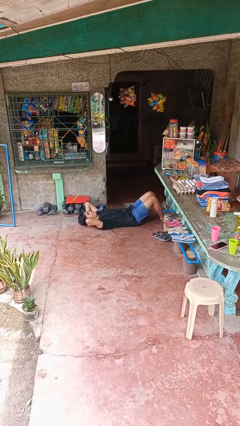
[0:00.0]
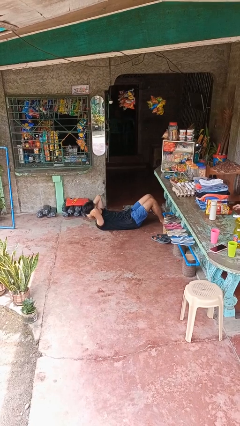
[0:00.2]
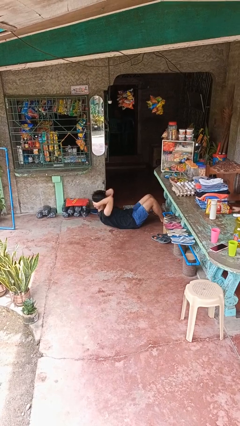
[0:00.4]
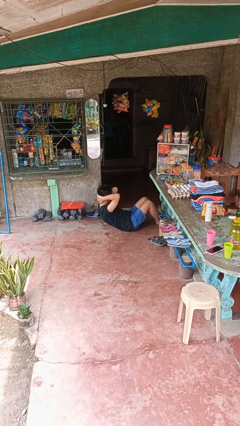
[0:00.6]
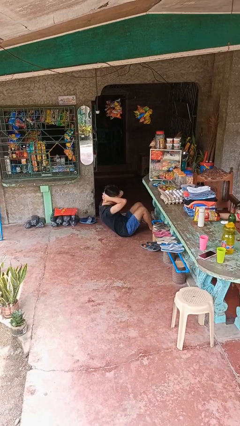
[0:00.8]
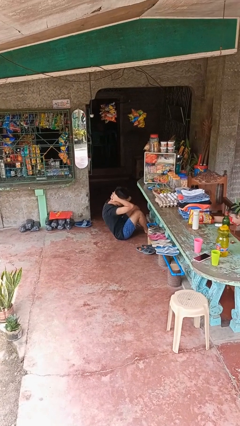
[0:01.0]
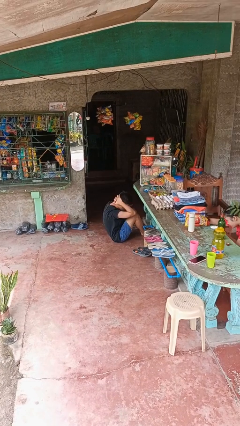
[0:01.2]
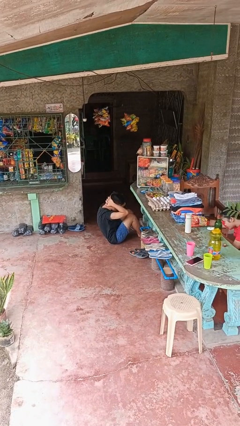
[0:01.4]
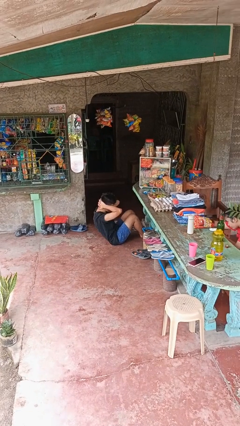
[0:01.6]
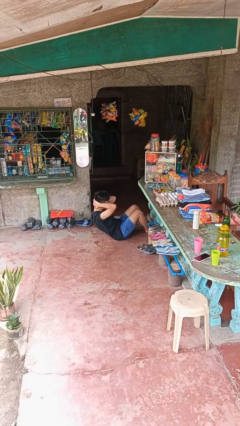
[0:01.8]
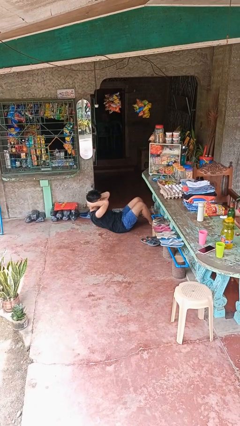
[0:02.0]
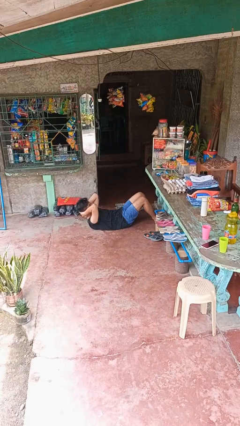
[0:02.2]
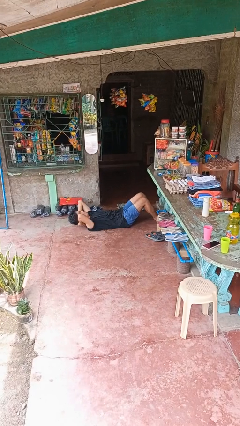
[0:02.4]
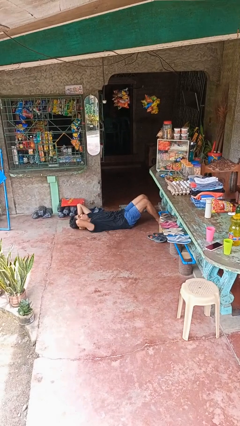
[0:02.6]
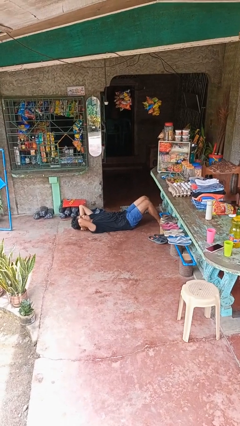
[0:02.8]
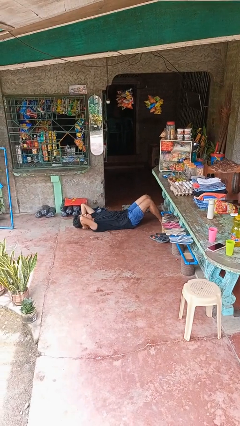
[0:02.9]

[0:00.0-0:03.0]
person exercises with situp

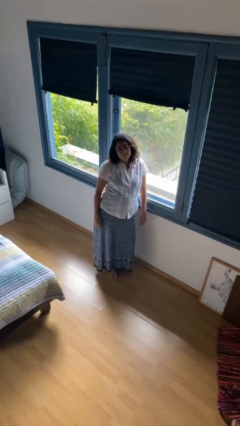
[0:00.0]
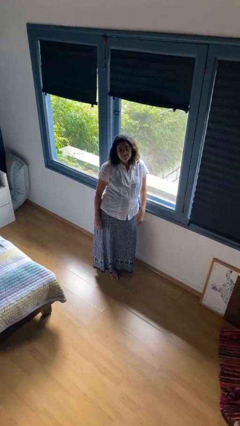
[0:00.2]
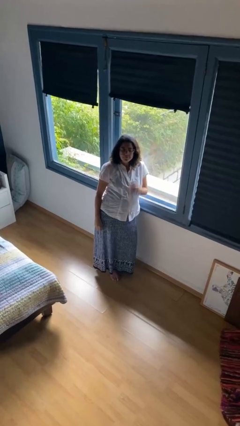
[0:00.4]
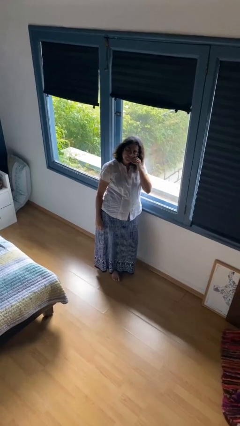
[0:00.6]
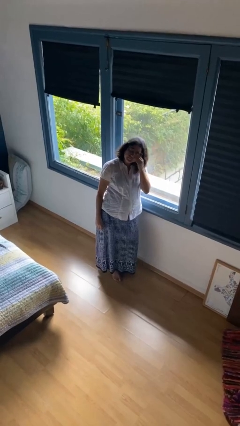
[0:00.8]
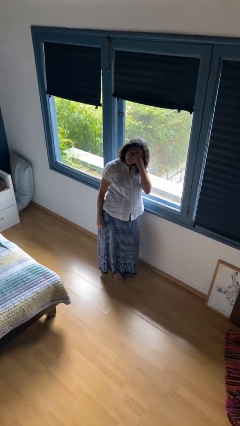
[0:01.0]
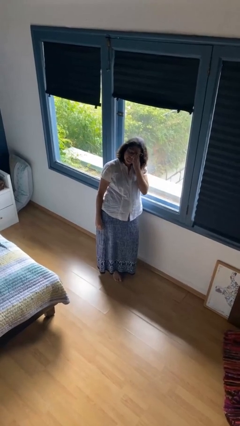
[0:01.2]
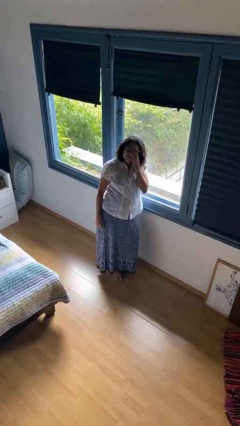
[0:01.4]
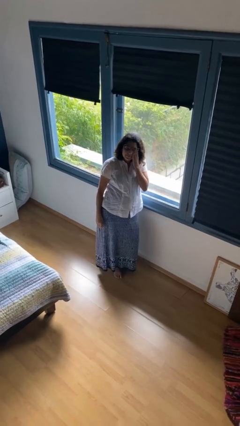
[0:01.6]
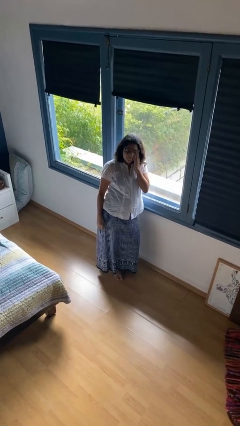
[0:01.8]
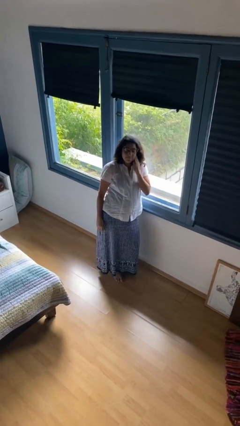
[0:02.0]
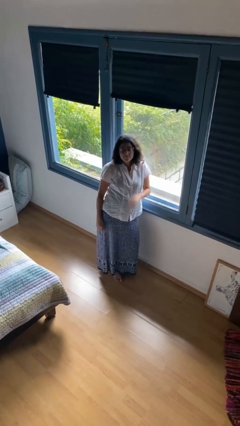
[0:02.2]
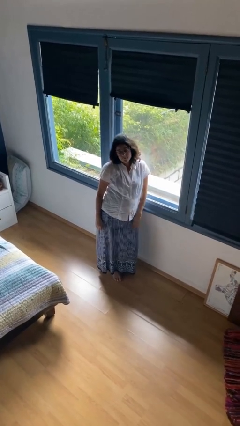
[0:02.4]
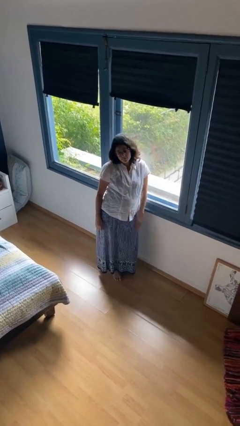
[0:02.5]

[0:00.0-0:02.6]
person rubs eyes

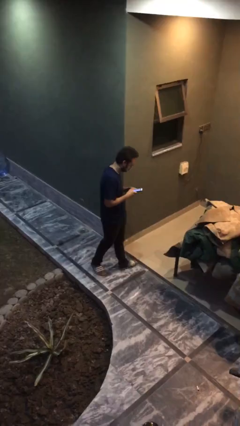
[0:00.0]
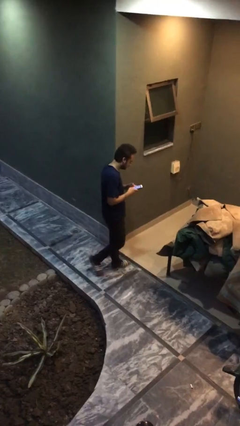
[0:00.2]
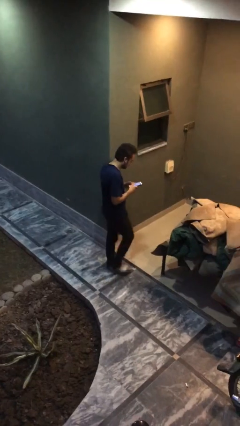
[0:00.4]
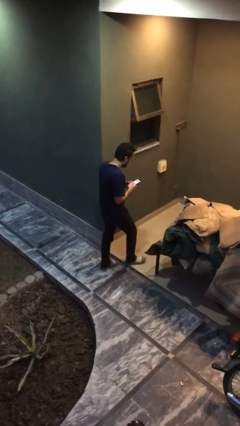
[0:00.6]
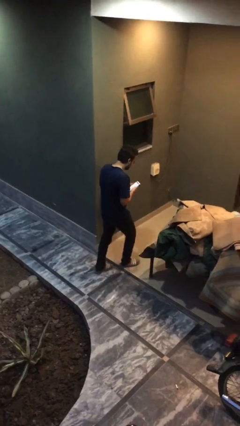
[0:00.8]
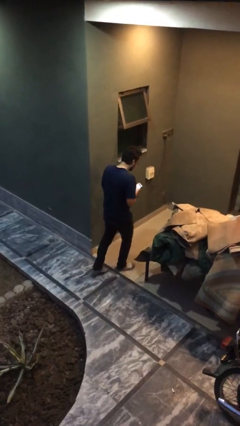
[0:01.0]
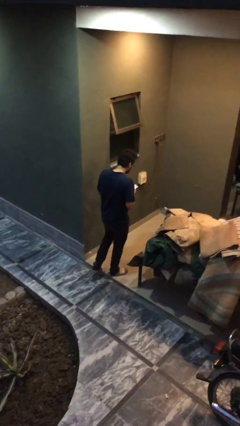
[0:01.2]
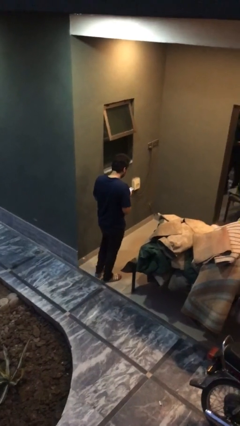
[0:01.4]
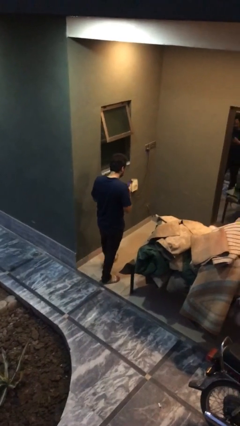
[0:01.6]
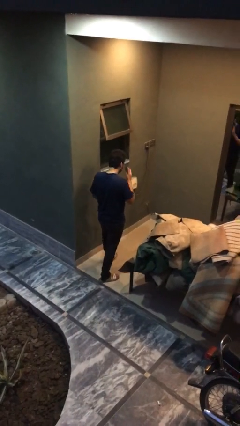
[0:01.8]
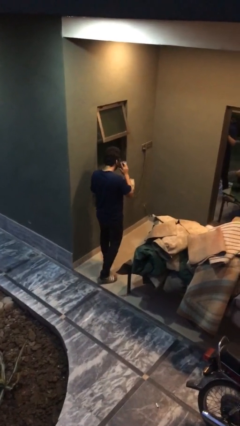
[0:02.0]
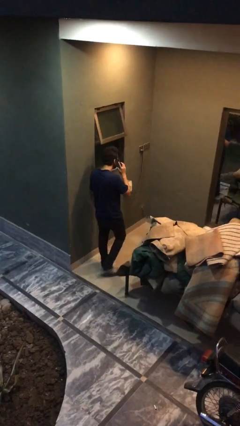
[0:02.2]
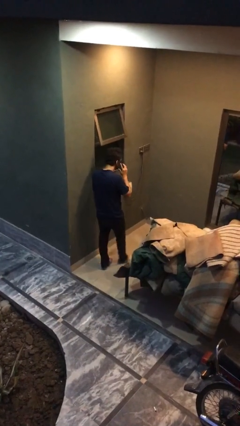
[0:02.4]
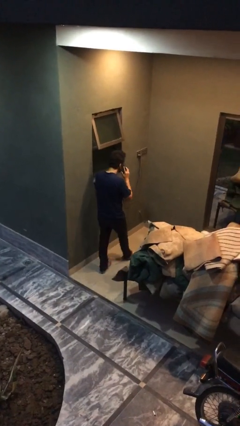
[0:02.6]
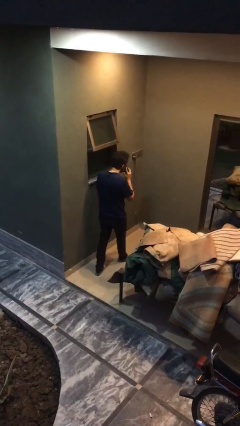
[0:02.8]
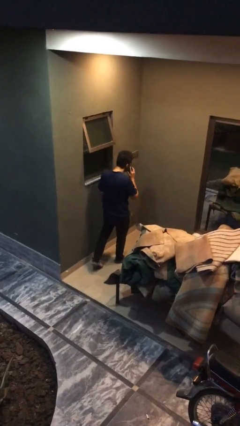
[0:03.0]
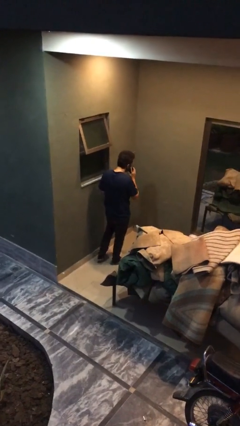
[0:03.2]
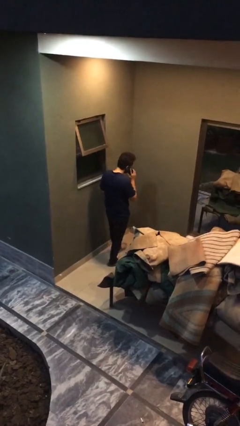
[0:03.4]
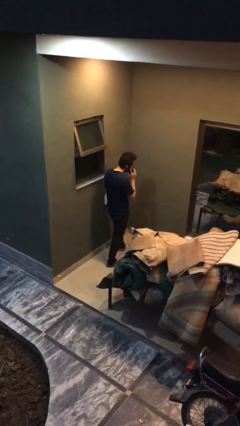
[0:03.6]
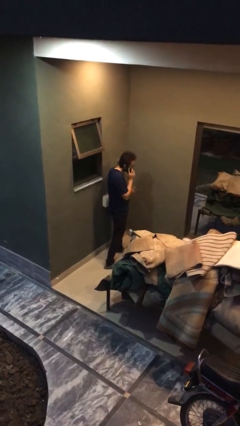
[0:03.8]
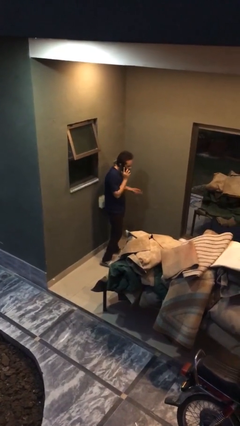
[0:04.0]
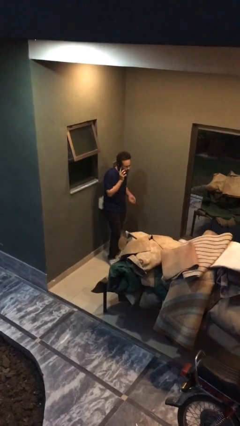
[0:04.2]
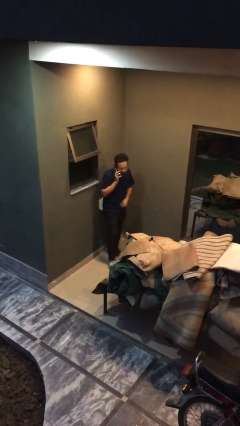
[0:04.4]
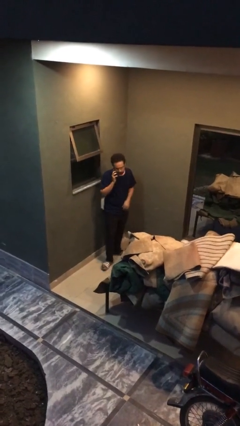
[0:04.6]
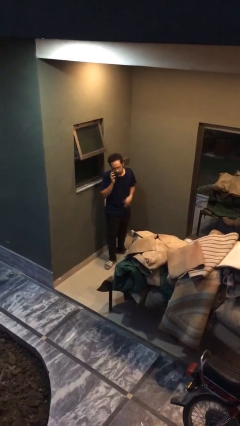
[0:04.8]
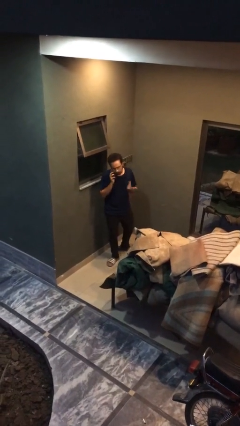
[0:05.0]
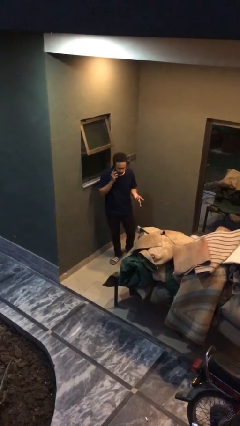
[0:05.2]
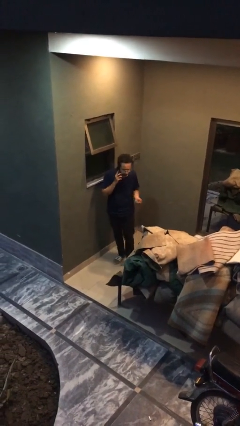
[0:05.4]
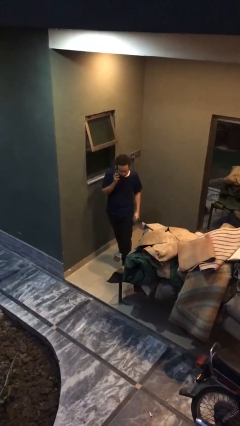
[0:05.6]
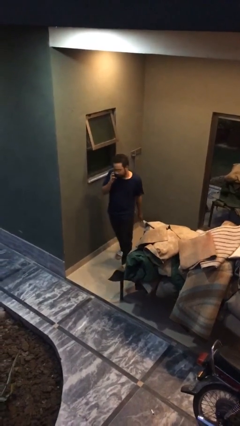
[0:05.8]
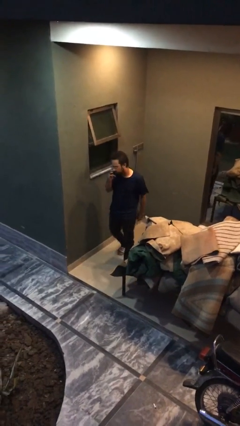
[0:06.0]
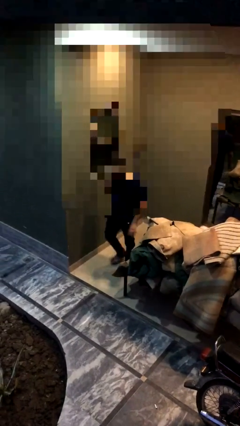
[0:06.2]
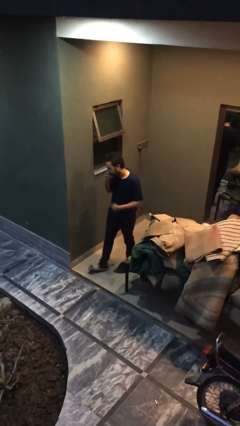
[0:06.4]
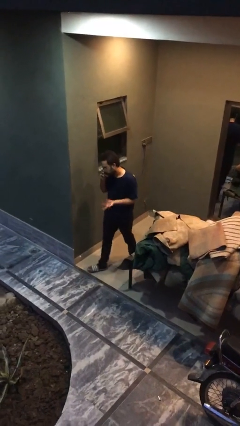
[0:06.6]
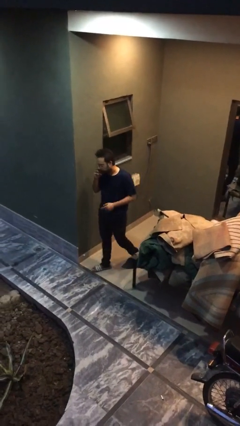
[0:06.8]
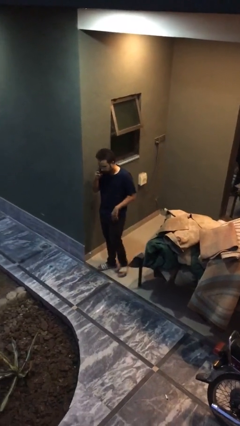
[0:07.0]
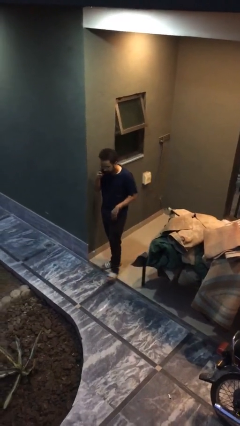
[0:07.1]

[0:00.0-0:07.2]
person talks on phone

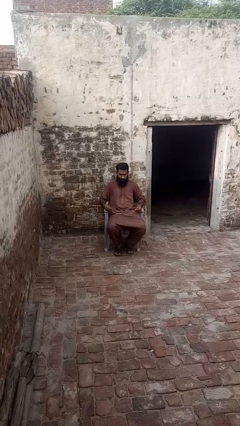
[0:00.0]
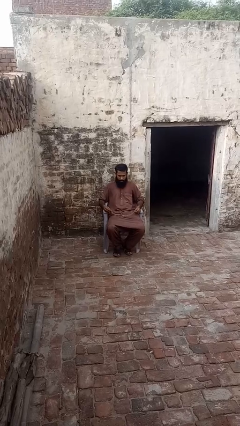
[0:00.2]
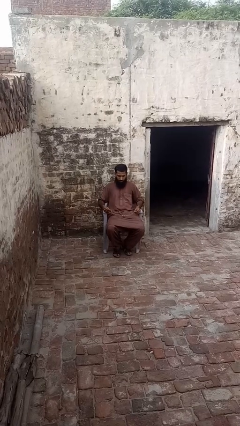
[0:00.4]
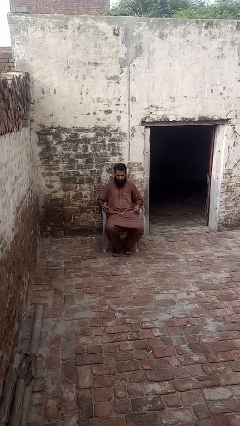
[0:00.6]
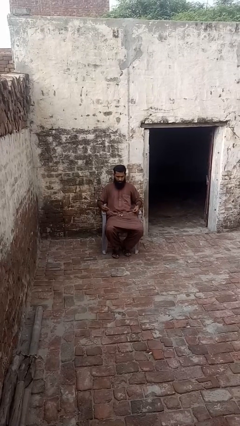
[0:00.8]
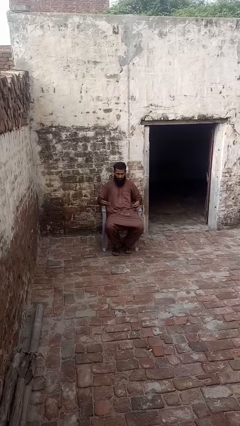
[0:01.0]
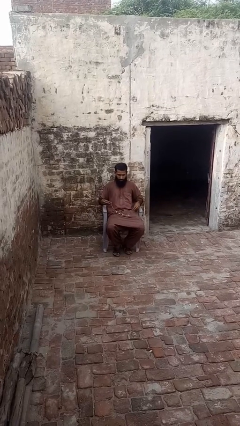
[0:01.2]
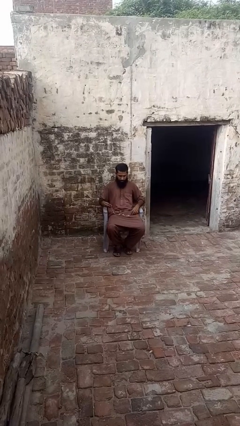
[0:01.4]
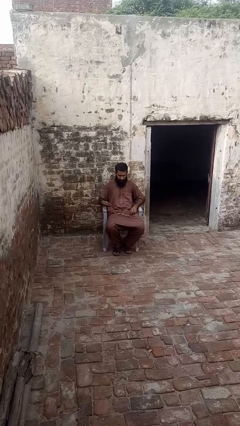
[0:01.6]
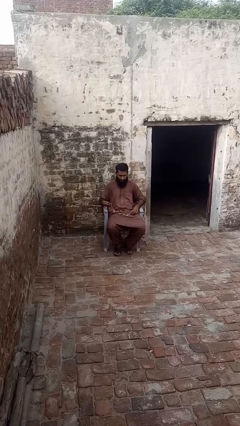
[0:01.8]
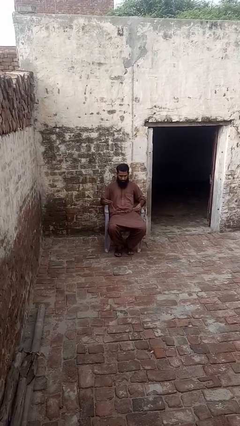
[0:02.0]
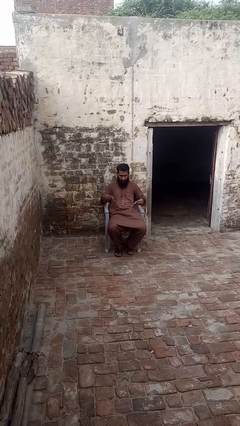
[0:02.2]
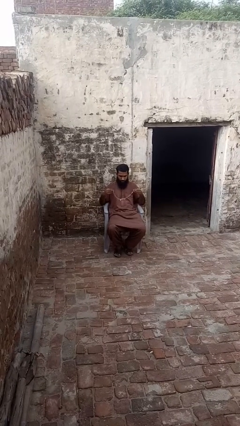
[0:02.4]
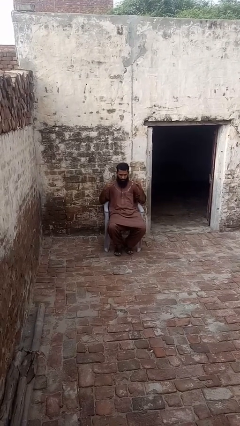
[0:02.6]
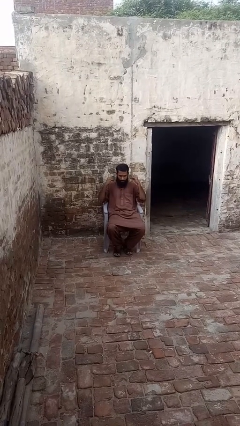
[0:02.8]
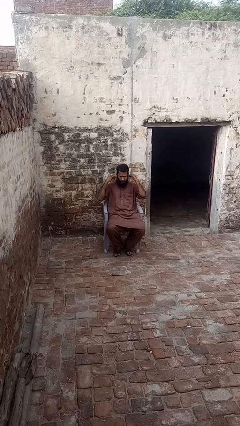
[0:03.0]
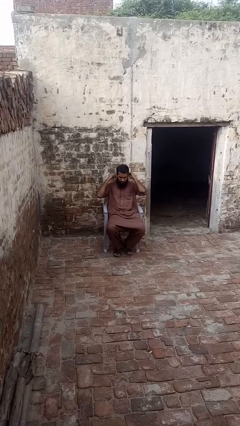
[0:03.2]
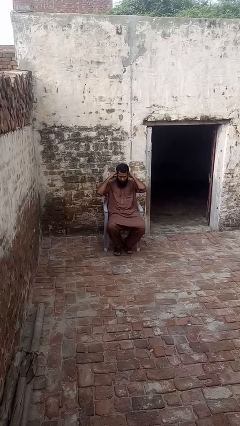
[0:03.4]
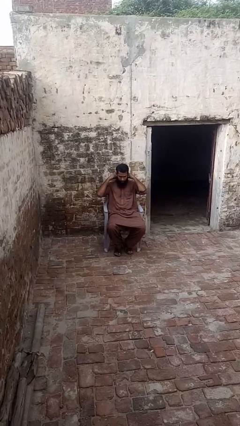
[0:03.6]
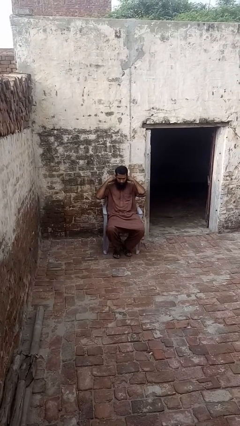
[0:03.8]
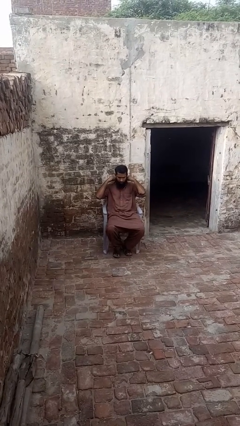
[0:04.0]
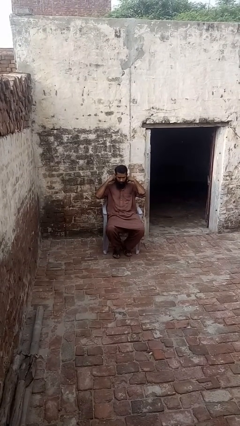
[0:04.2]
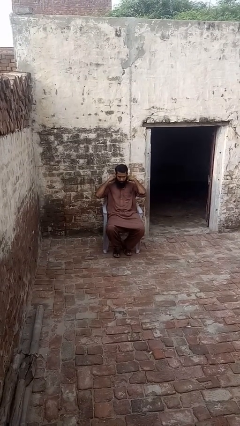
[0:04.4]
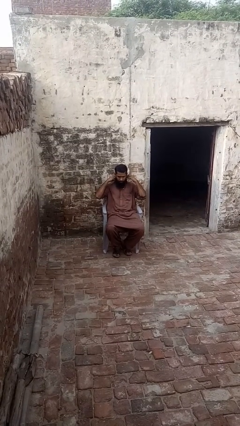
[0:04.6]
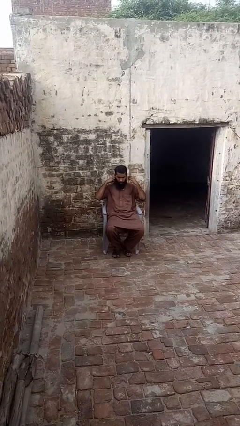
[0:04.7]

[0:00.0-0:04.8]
person puts on necklace
